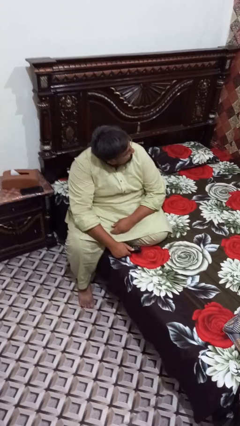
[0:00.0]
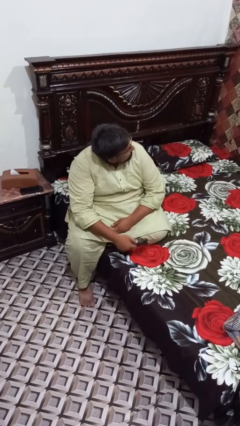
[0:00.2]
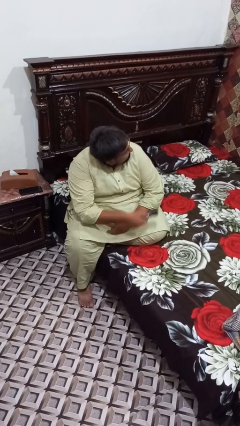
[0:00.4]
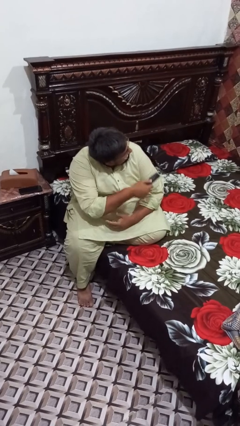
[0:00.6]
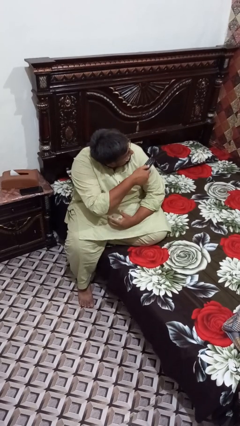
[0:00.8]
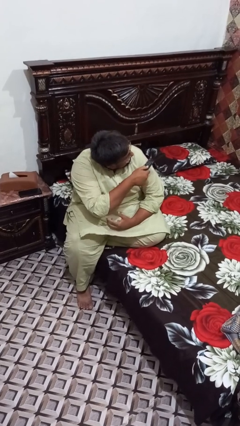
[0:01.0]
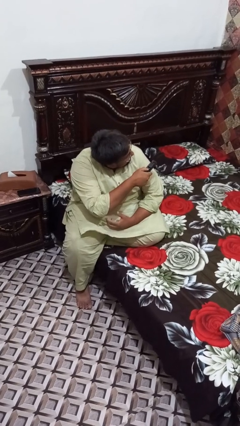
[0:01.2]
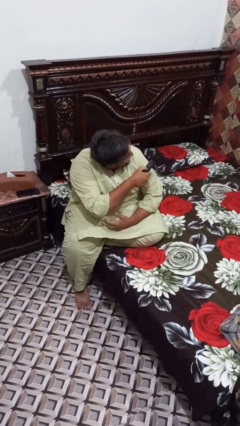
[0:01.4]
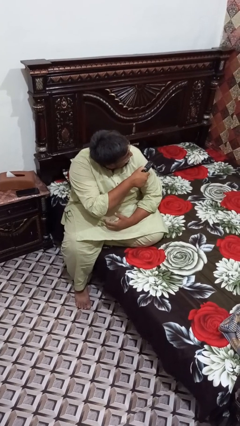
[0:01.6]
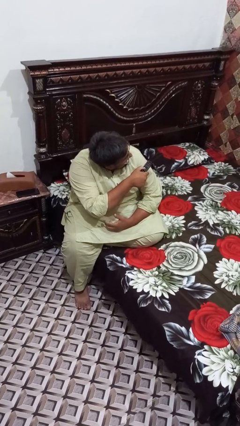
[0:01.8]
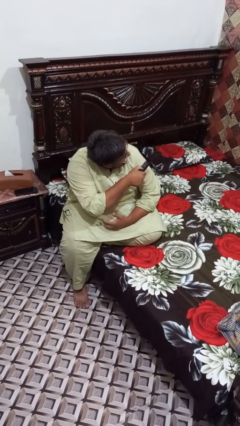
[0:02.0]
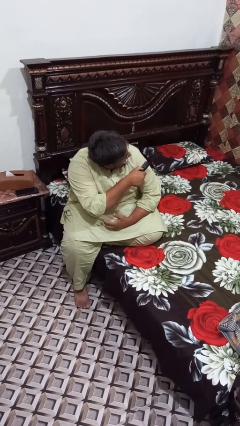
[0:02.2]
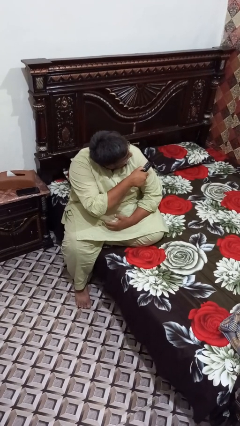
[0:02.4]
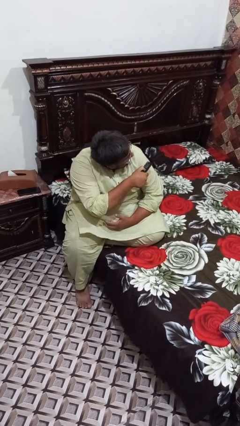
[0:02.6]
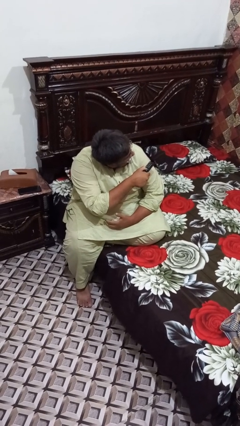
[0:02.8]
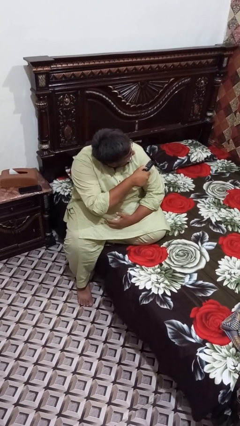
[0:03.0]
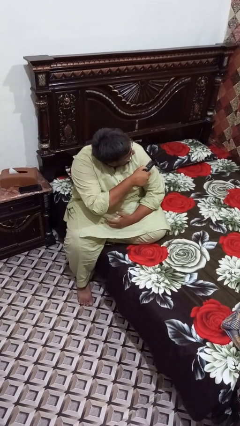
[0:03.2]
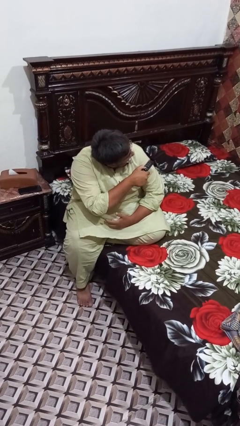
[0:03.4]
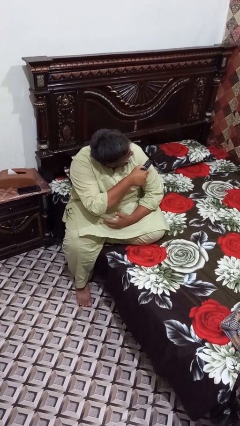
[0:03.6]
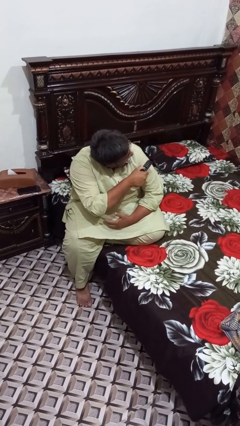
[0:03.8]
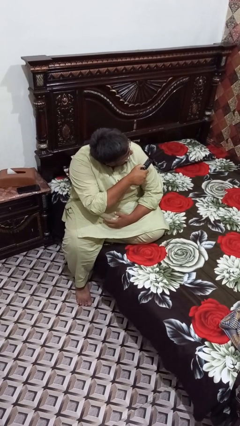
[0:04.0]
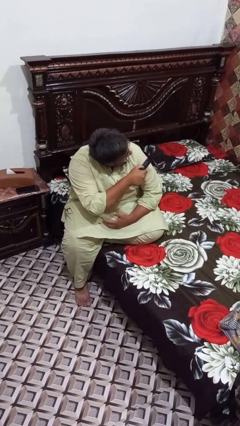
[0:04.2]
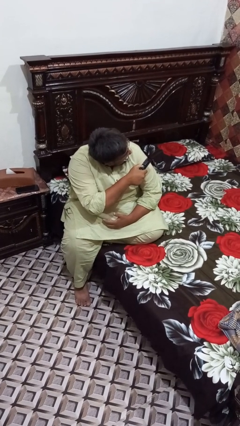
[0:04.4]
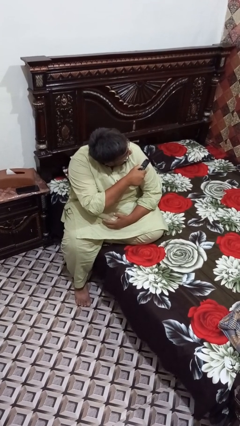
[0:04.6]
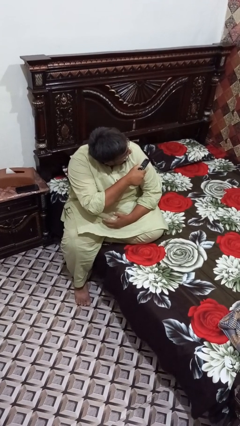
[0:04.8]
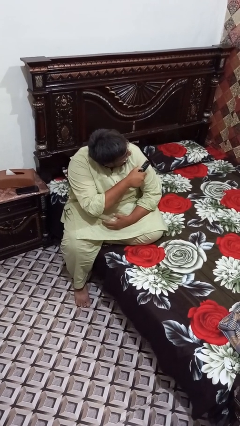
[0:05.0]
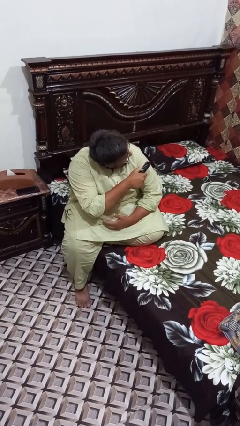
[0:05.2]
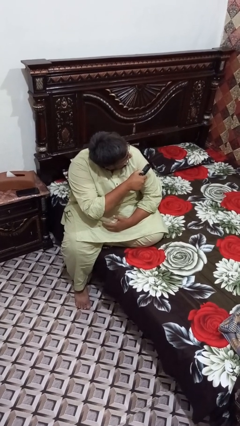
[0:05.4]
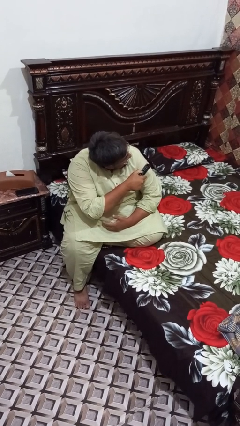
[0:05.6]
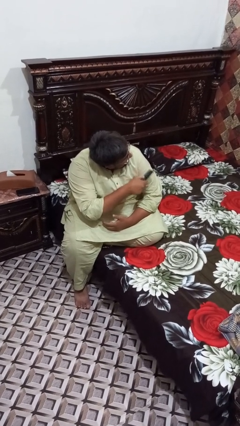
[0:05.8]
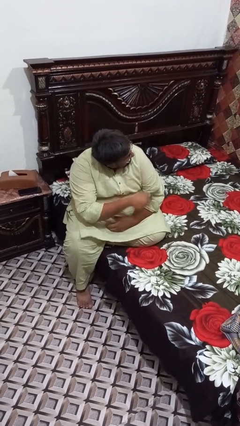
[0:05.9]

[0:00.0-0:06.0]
person uses television remote

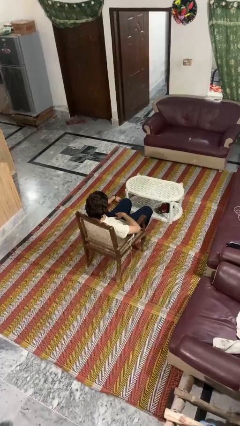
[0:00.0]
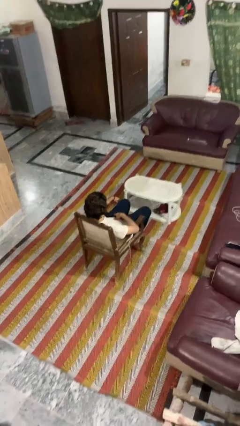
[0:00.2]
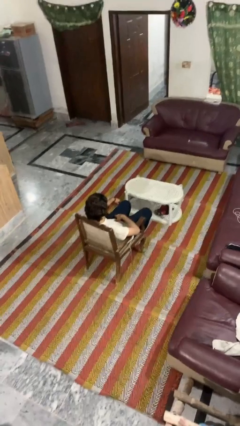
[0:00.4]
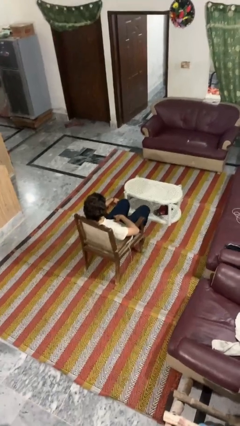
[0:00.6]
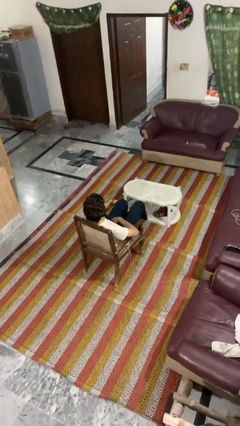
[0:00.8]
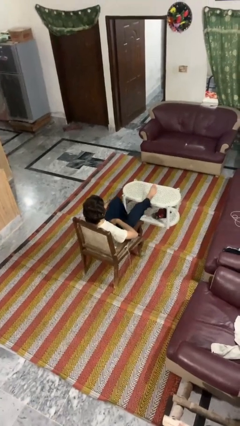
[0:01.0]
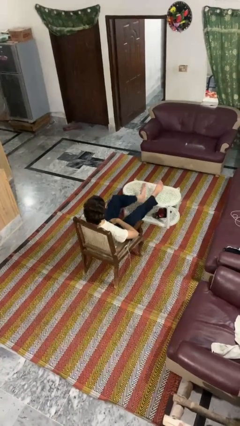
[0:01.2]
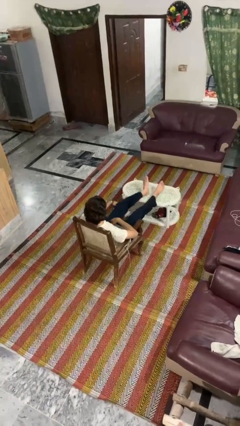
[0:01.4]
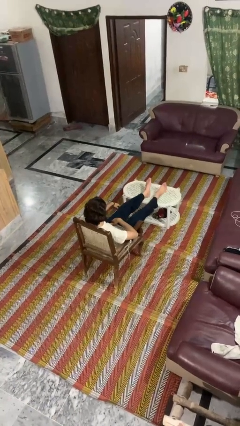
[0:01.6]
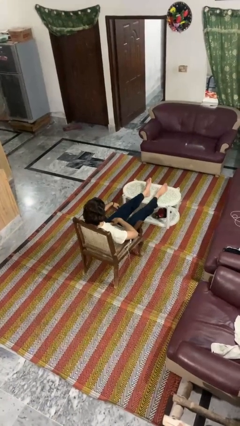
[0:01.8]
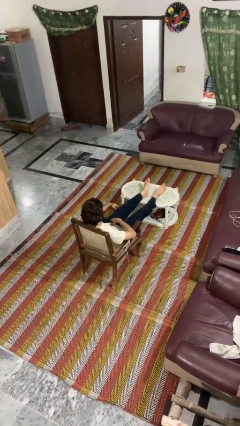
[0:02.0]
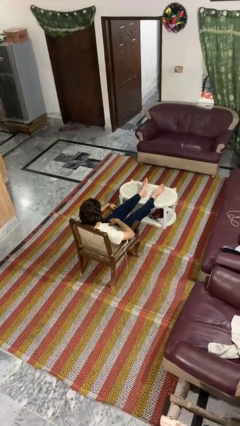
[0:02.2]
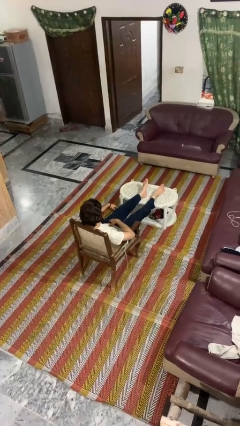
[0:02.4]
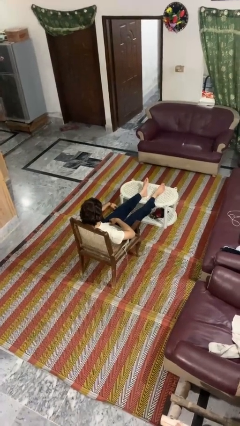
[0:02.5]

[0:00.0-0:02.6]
person puts feet up

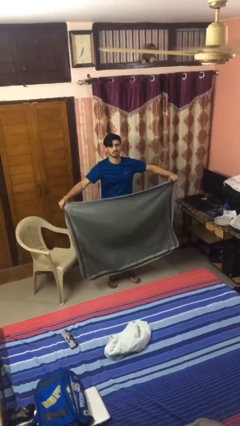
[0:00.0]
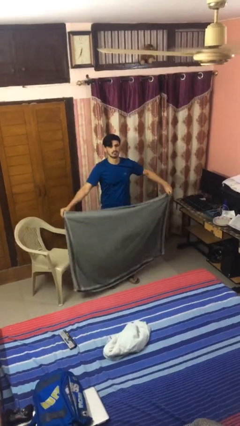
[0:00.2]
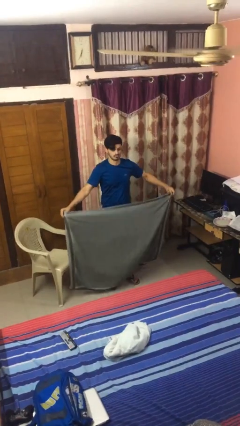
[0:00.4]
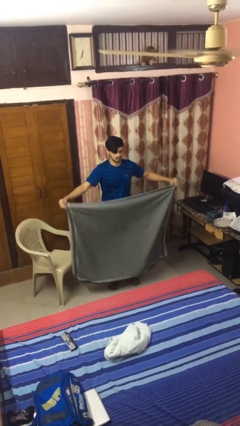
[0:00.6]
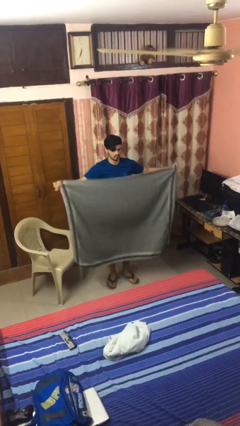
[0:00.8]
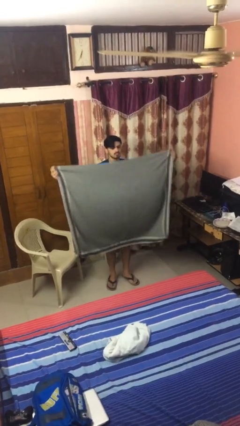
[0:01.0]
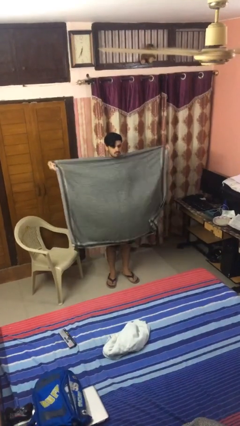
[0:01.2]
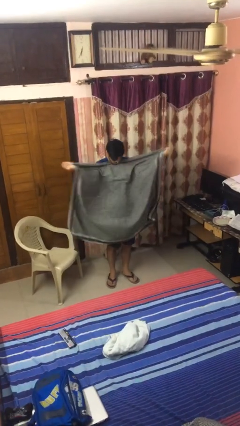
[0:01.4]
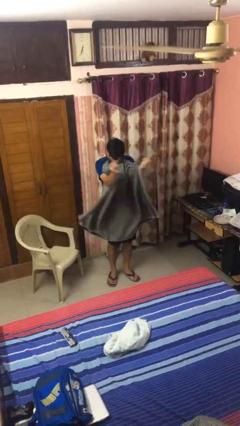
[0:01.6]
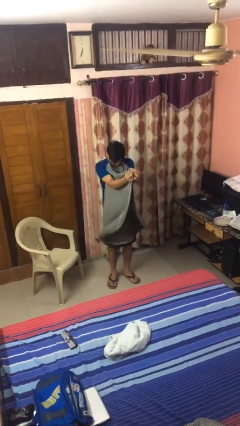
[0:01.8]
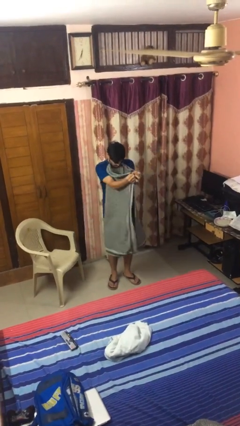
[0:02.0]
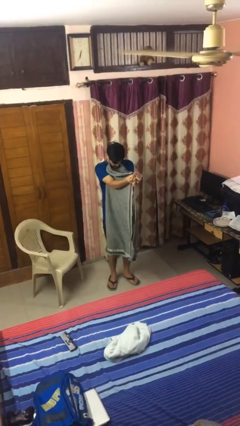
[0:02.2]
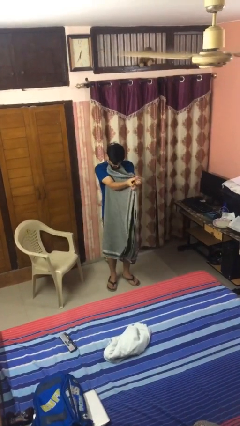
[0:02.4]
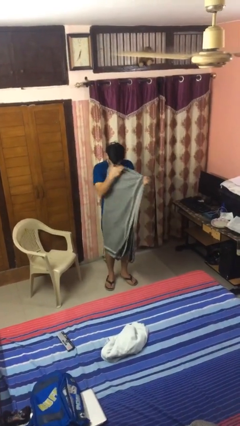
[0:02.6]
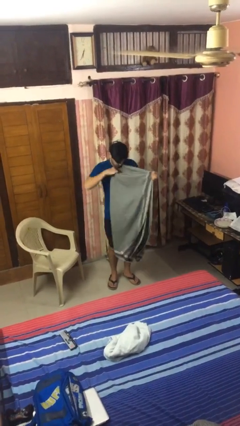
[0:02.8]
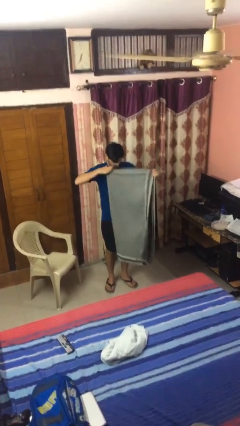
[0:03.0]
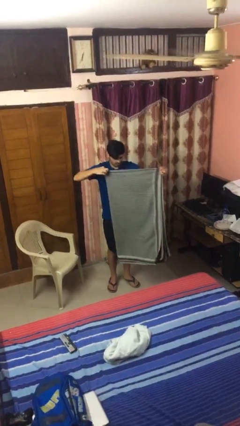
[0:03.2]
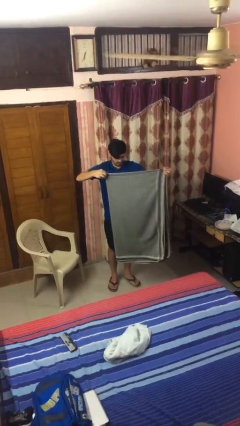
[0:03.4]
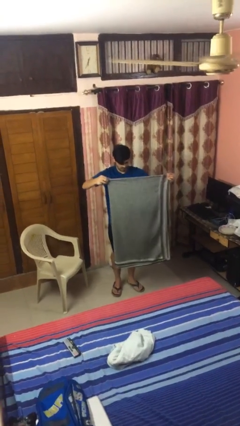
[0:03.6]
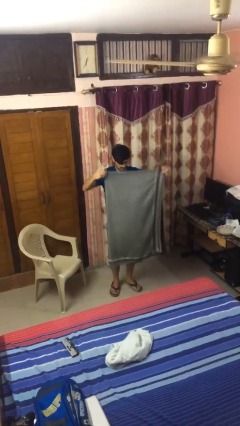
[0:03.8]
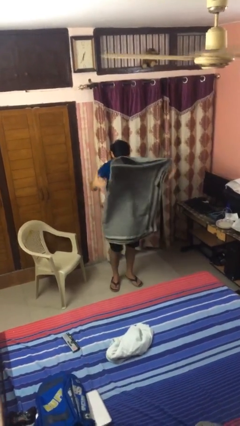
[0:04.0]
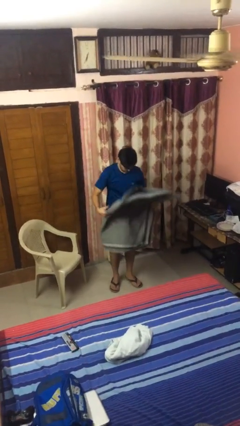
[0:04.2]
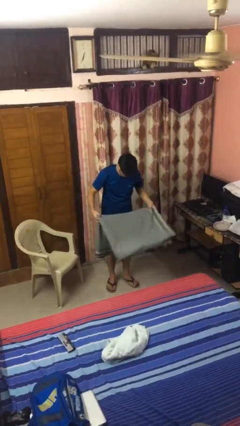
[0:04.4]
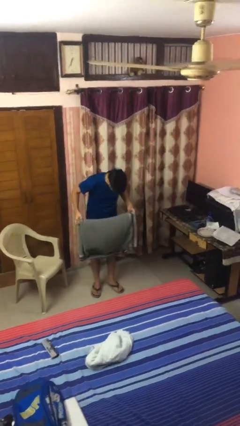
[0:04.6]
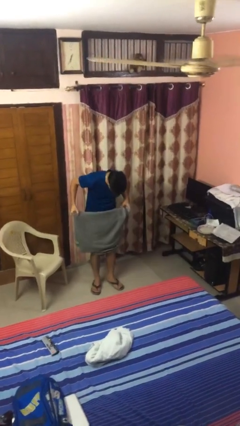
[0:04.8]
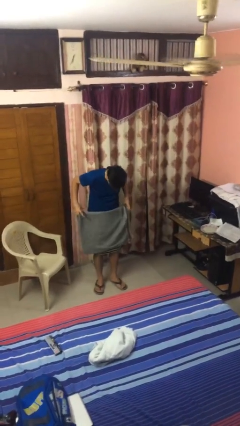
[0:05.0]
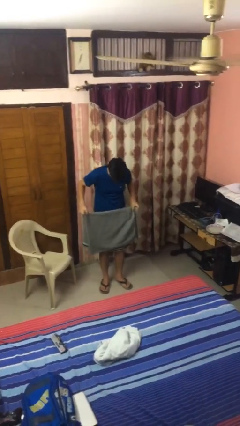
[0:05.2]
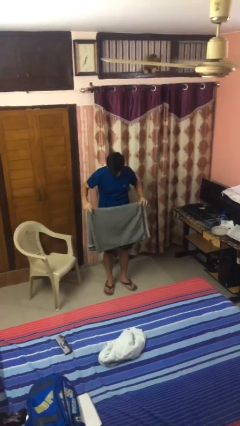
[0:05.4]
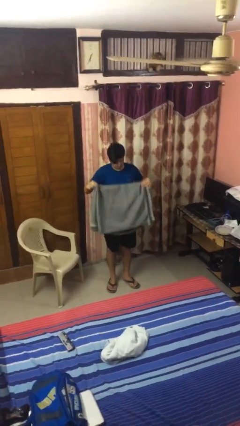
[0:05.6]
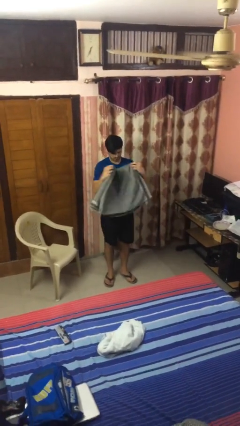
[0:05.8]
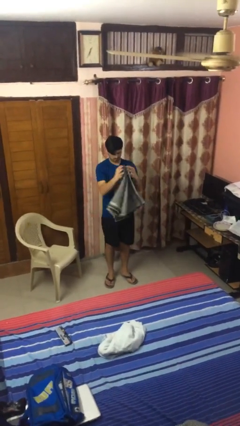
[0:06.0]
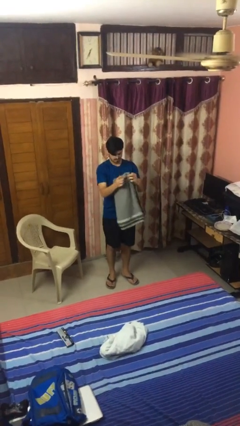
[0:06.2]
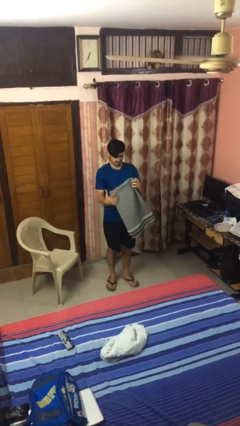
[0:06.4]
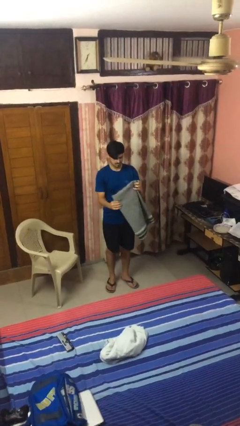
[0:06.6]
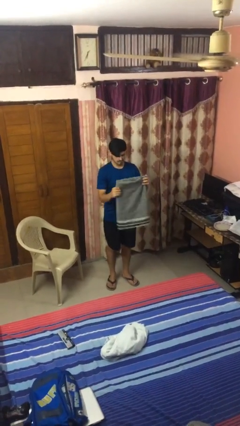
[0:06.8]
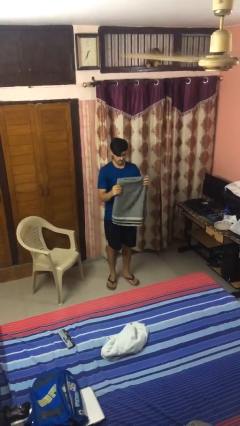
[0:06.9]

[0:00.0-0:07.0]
person folds blanket

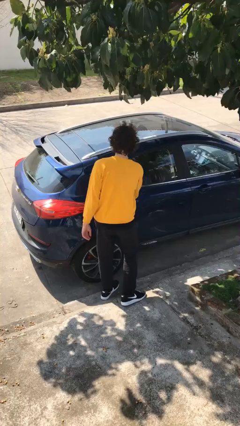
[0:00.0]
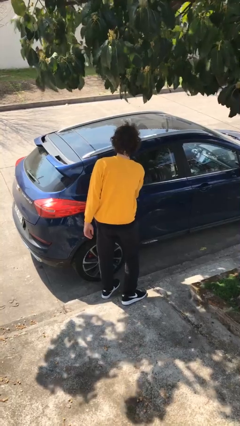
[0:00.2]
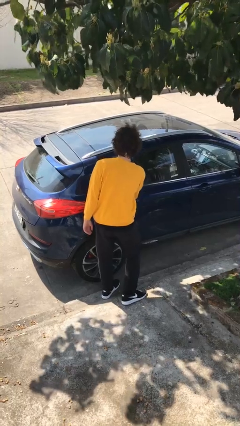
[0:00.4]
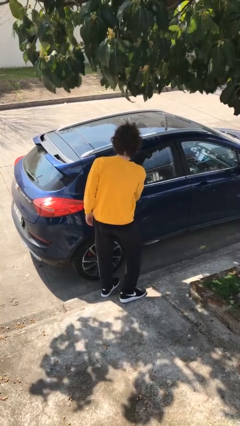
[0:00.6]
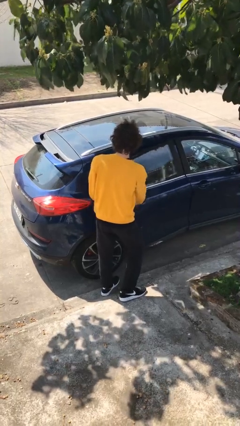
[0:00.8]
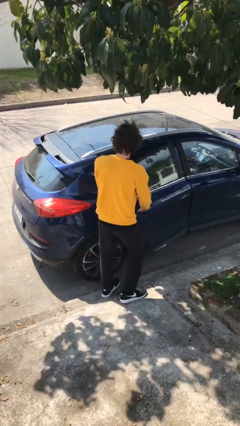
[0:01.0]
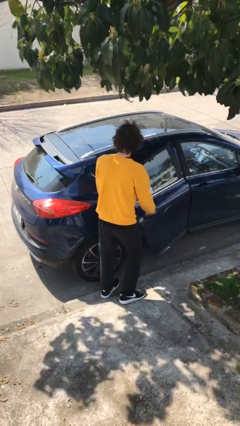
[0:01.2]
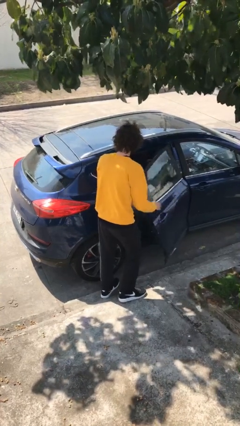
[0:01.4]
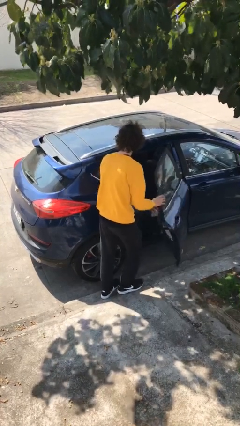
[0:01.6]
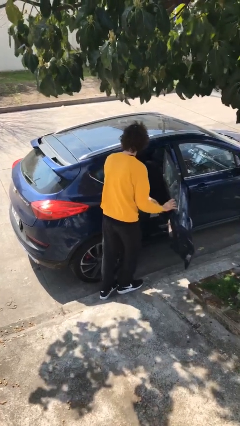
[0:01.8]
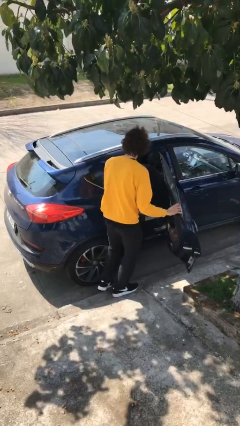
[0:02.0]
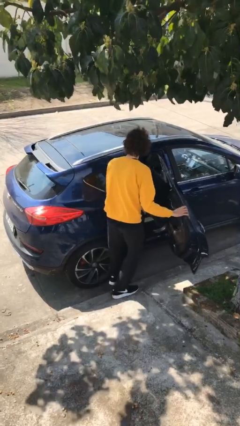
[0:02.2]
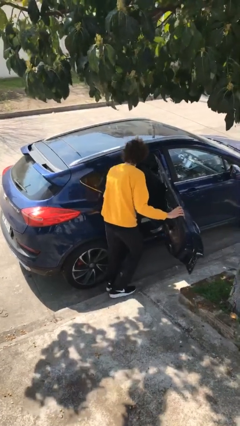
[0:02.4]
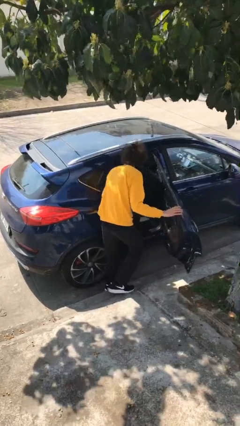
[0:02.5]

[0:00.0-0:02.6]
person opens car door
